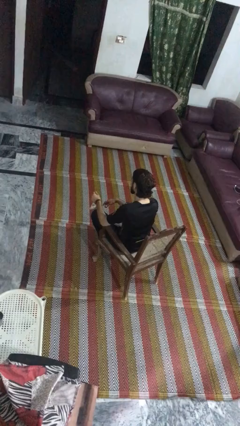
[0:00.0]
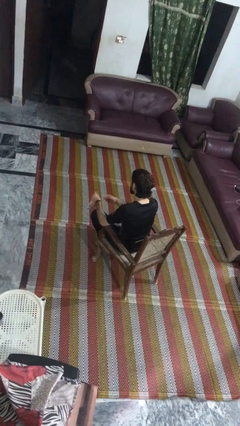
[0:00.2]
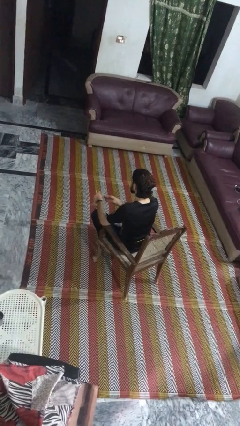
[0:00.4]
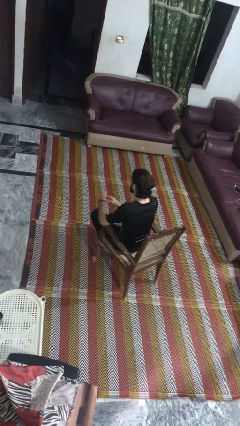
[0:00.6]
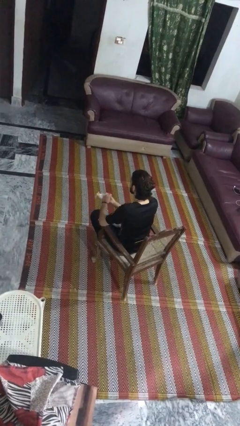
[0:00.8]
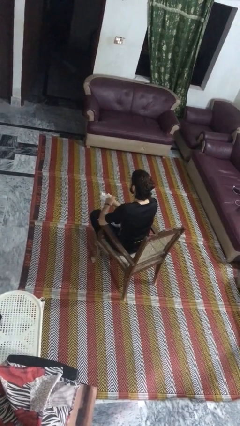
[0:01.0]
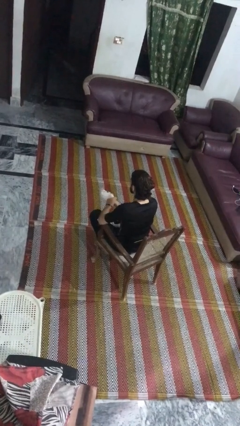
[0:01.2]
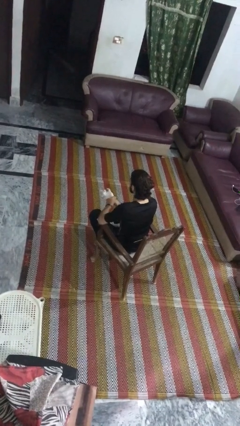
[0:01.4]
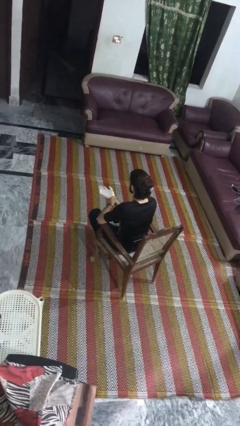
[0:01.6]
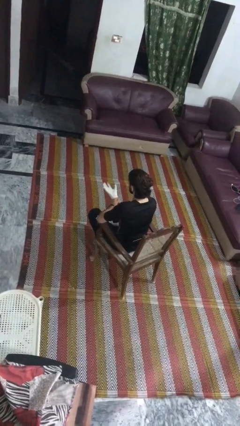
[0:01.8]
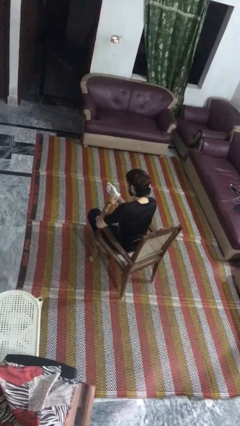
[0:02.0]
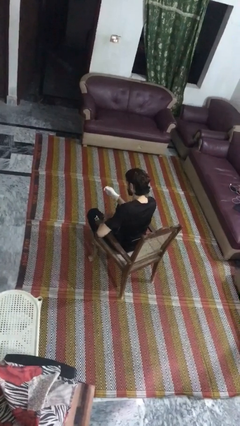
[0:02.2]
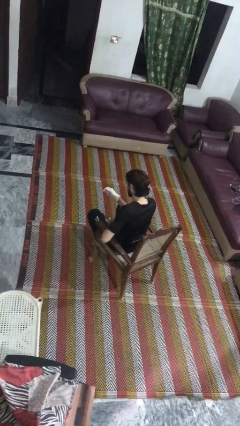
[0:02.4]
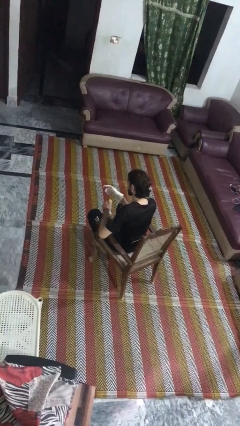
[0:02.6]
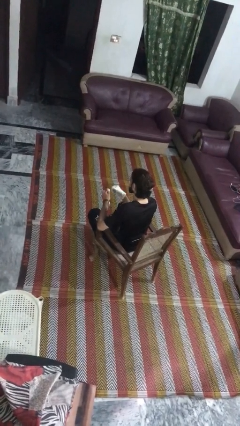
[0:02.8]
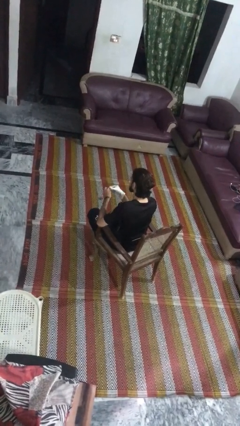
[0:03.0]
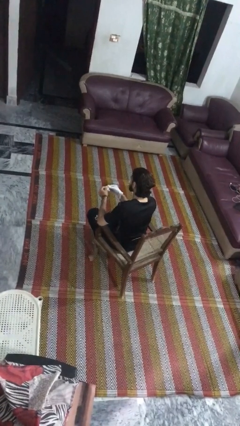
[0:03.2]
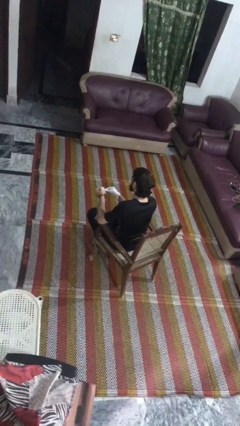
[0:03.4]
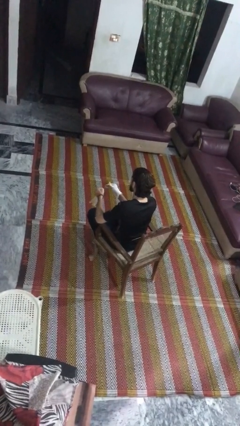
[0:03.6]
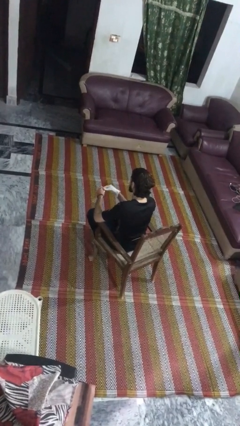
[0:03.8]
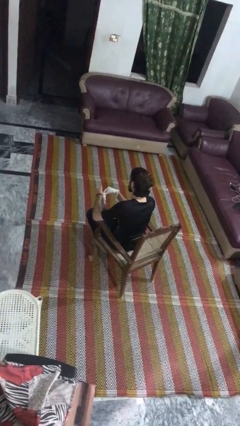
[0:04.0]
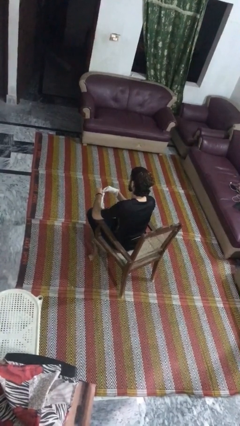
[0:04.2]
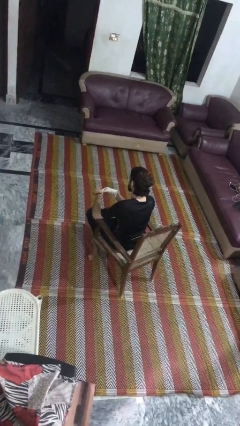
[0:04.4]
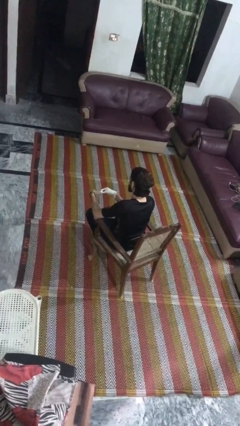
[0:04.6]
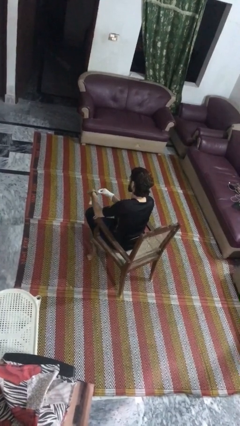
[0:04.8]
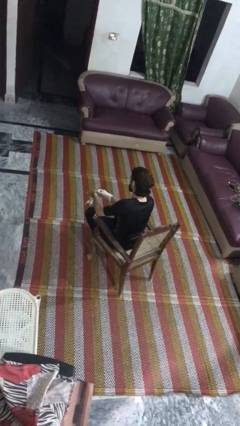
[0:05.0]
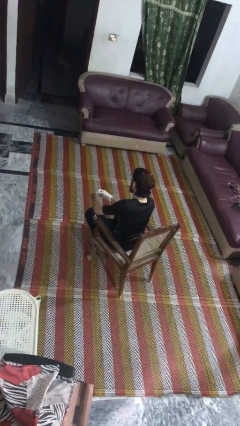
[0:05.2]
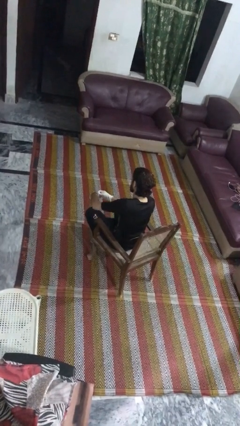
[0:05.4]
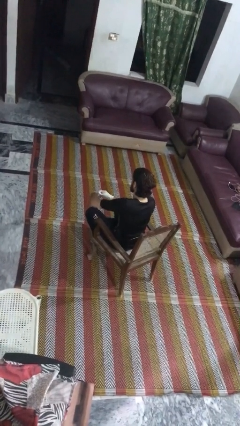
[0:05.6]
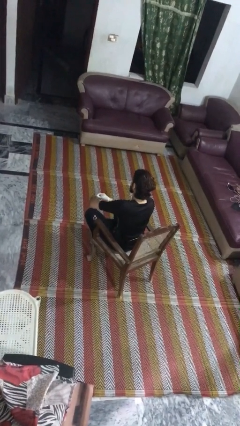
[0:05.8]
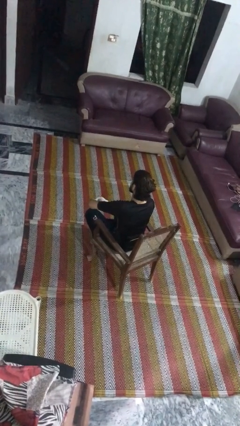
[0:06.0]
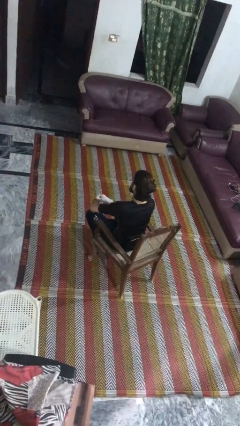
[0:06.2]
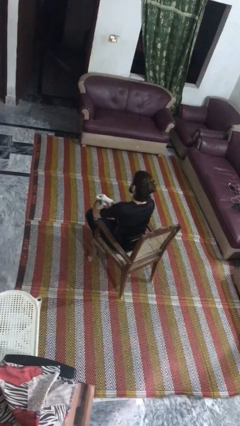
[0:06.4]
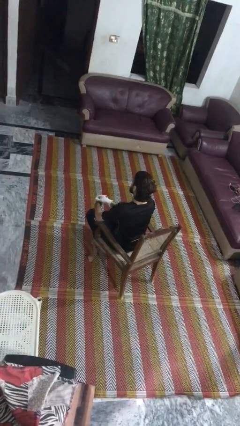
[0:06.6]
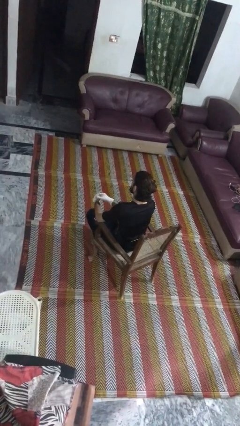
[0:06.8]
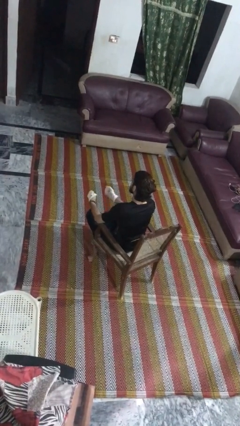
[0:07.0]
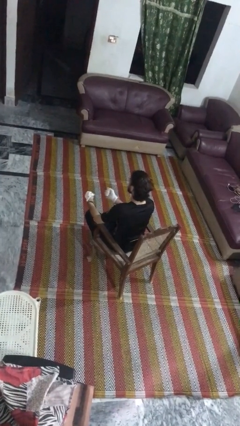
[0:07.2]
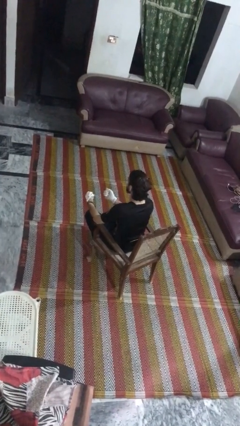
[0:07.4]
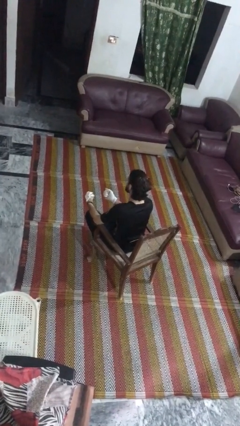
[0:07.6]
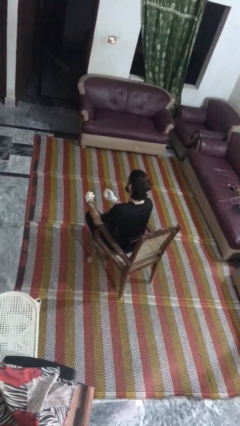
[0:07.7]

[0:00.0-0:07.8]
person puts on gloves

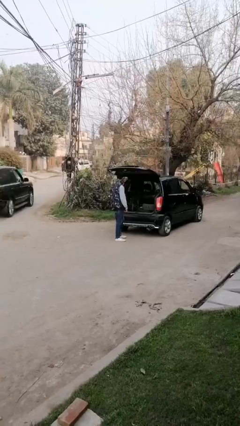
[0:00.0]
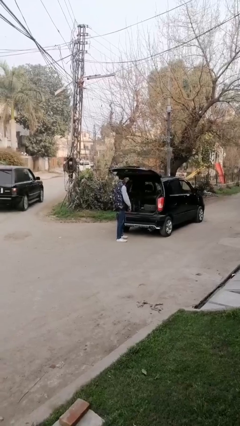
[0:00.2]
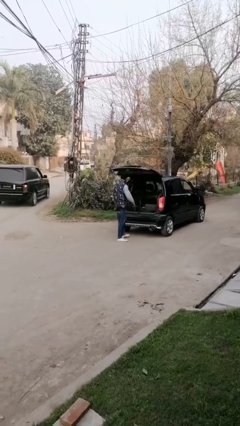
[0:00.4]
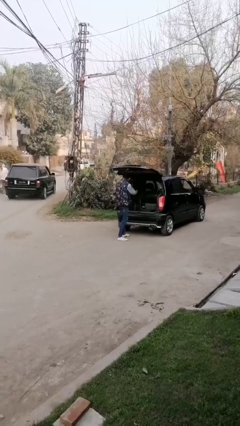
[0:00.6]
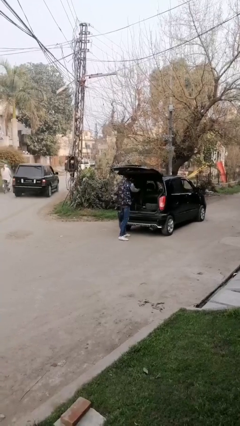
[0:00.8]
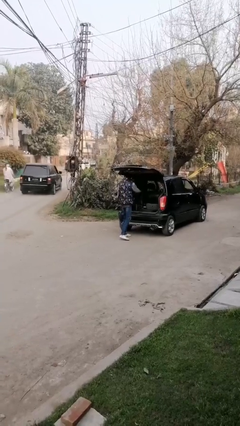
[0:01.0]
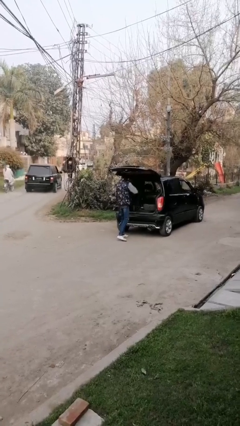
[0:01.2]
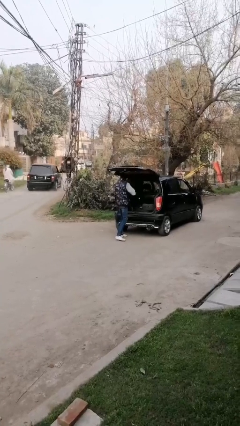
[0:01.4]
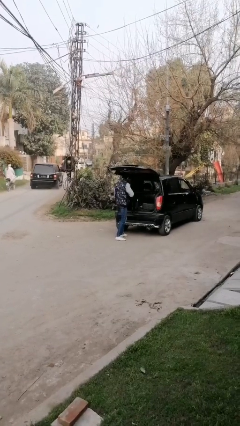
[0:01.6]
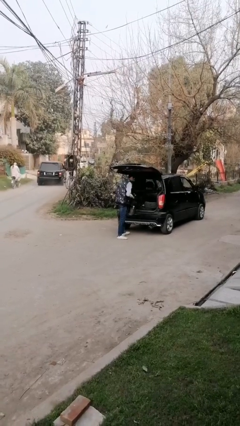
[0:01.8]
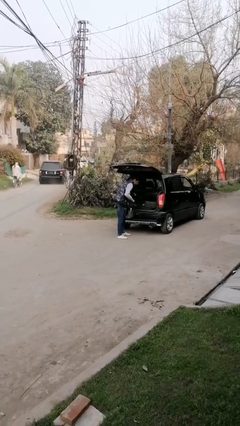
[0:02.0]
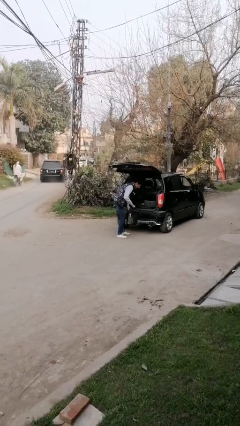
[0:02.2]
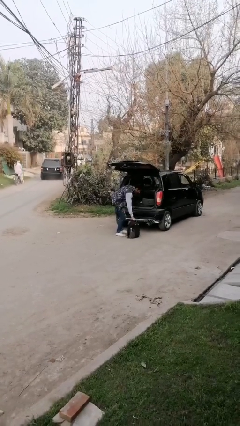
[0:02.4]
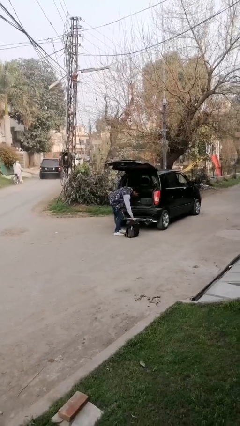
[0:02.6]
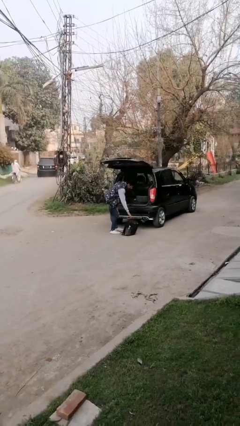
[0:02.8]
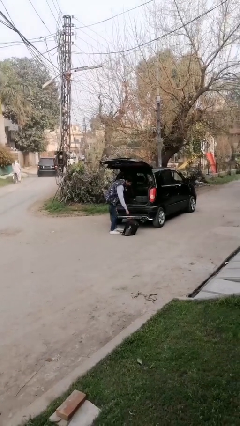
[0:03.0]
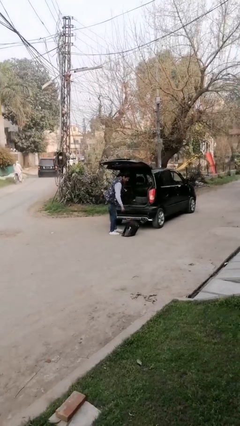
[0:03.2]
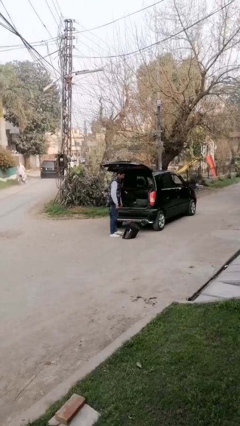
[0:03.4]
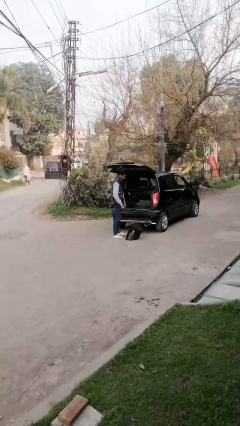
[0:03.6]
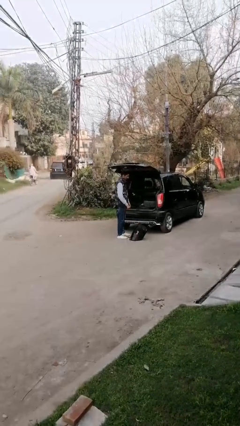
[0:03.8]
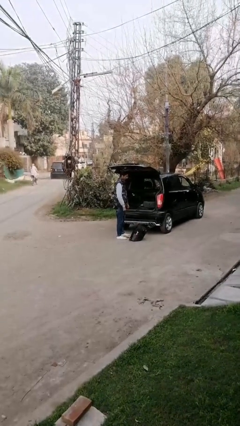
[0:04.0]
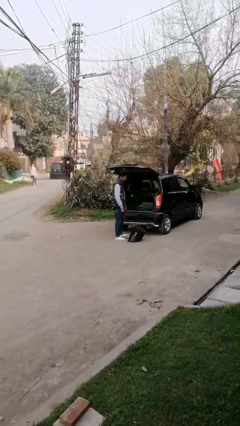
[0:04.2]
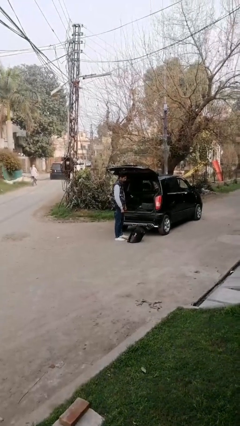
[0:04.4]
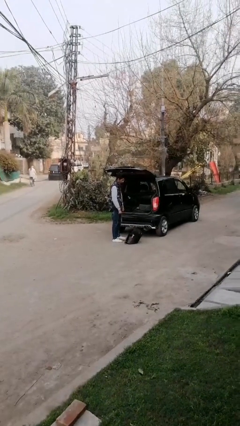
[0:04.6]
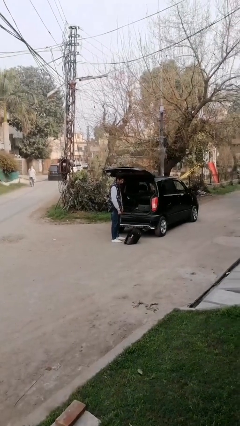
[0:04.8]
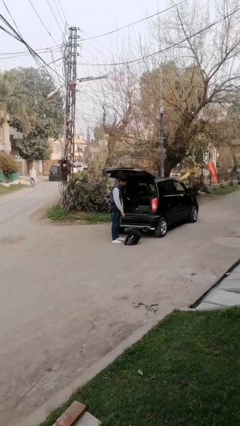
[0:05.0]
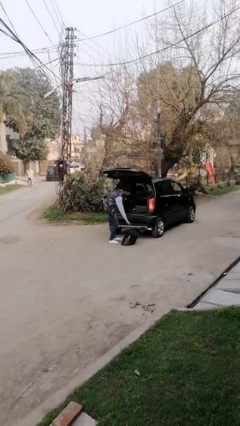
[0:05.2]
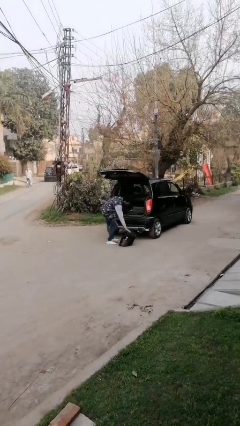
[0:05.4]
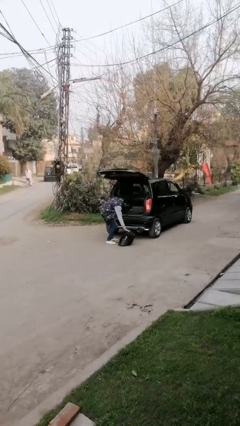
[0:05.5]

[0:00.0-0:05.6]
person unloads car

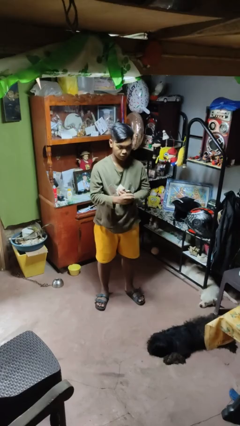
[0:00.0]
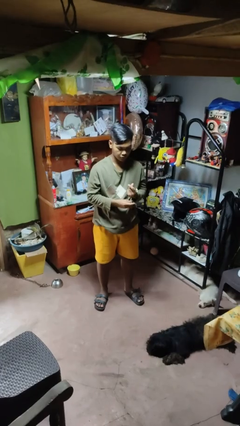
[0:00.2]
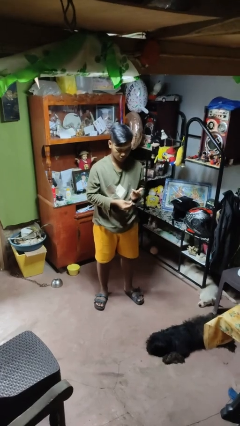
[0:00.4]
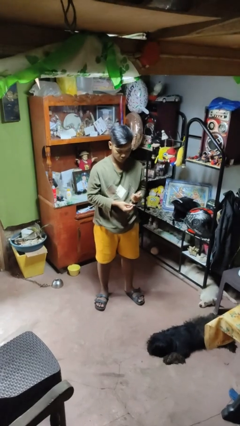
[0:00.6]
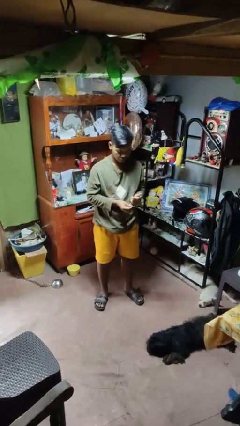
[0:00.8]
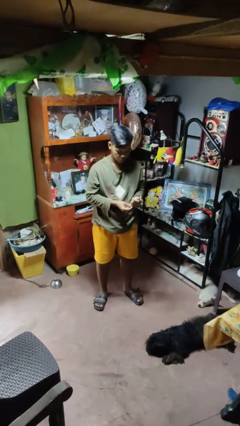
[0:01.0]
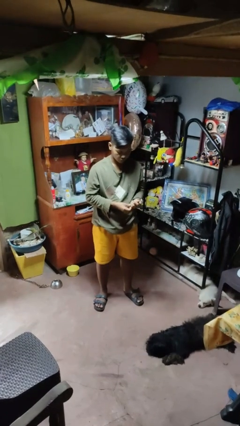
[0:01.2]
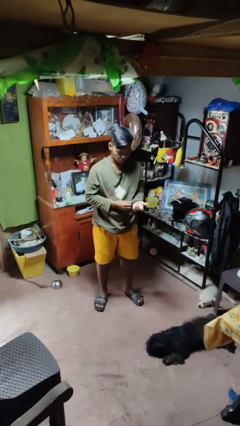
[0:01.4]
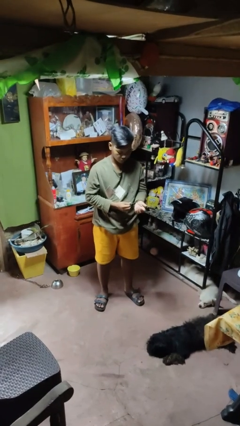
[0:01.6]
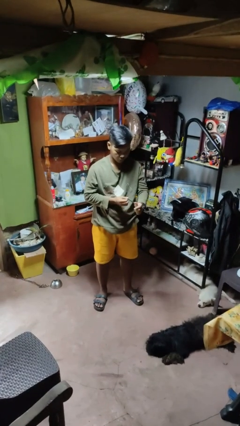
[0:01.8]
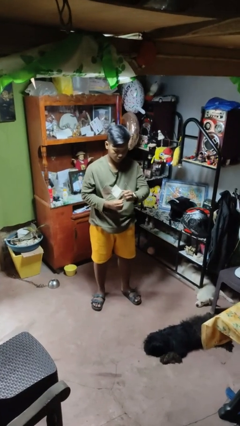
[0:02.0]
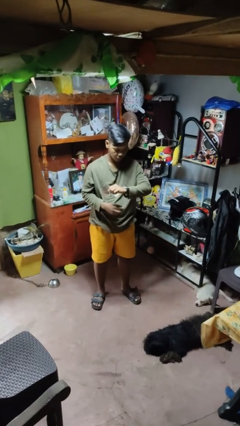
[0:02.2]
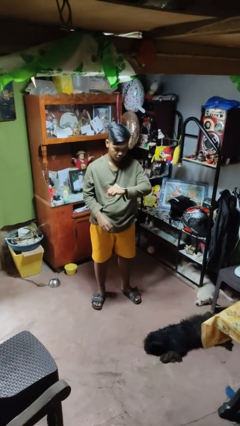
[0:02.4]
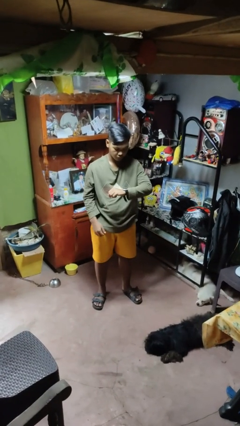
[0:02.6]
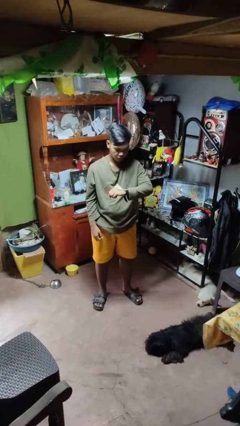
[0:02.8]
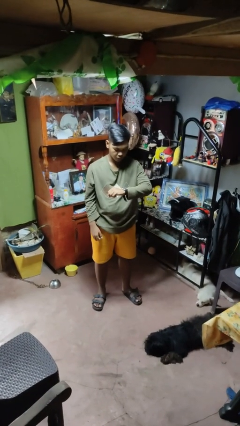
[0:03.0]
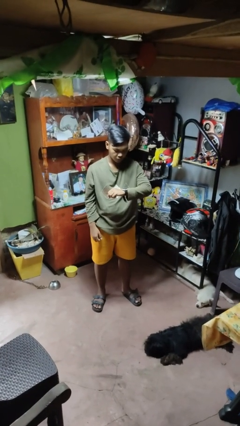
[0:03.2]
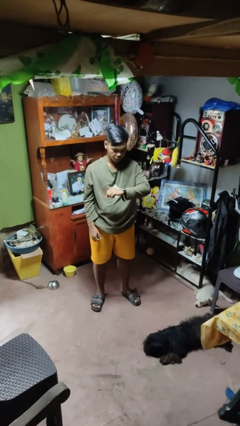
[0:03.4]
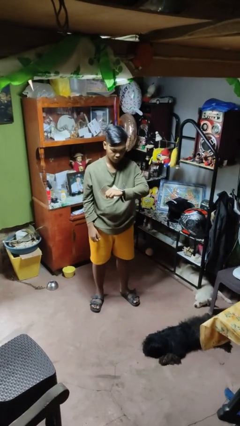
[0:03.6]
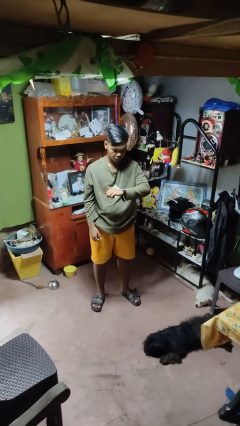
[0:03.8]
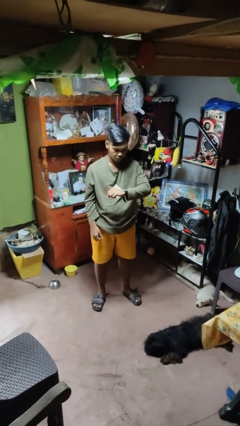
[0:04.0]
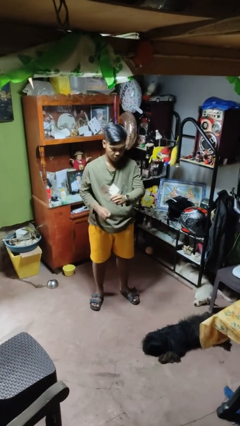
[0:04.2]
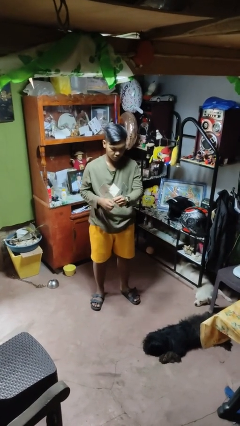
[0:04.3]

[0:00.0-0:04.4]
person puts on wristwatch

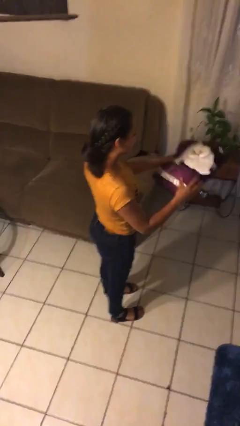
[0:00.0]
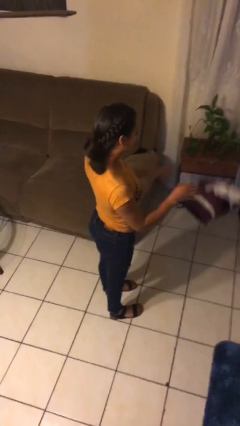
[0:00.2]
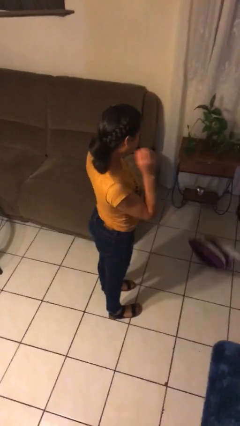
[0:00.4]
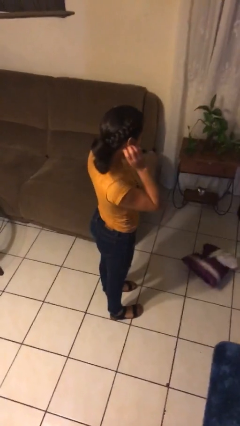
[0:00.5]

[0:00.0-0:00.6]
person throws object to ground
